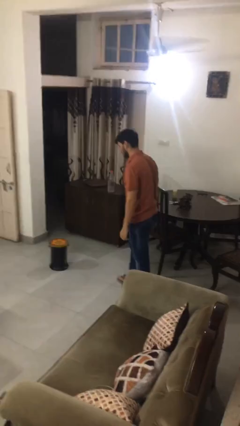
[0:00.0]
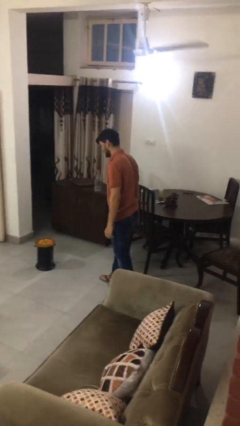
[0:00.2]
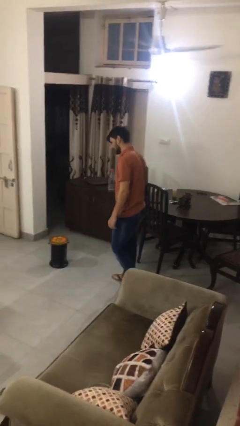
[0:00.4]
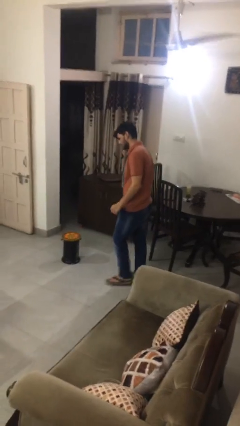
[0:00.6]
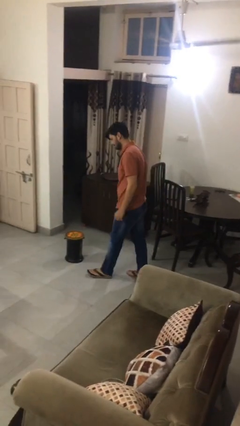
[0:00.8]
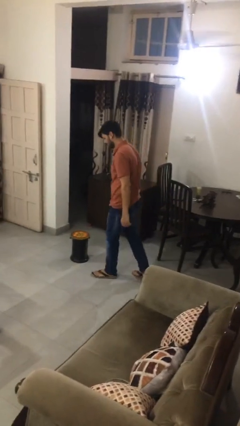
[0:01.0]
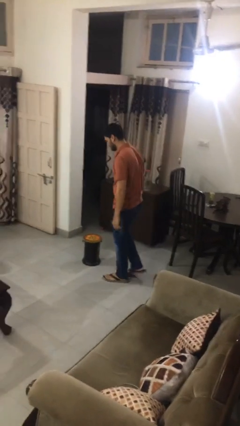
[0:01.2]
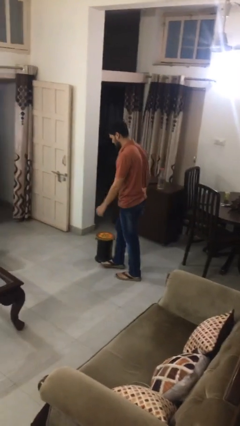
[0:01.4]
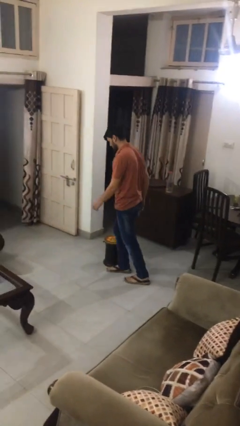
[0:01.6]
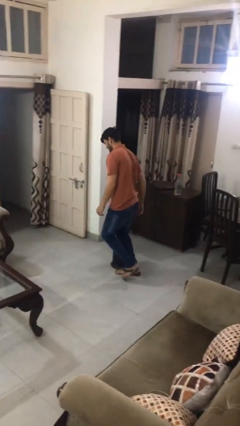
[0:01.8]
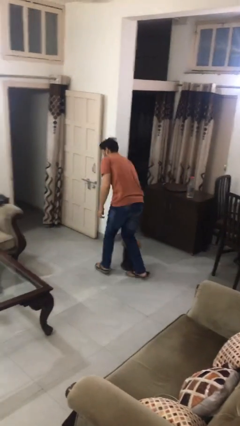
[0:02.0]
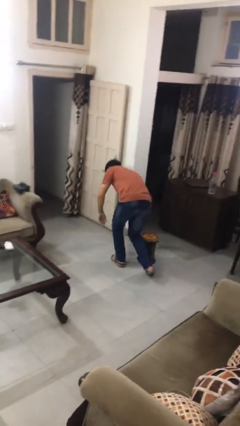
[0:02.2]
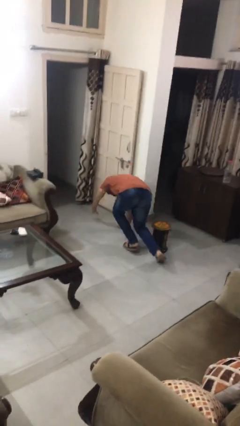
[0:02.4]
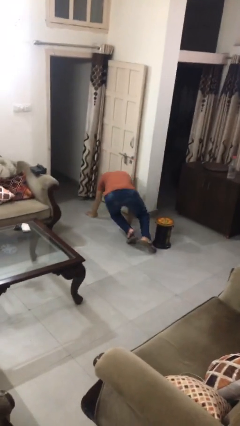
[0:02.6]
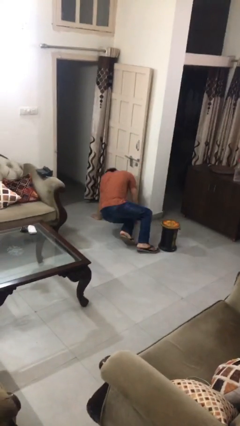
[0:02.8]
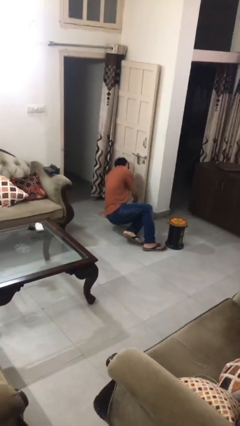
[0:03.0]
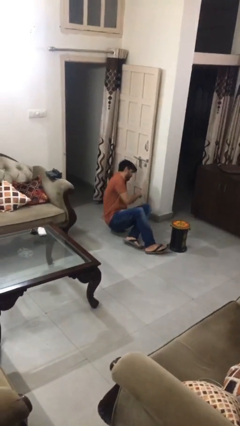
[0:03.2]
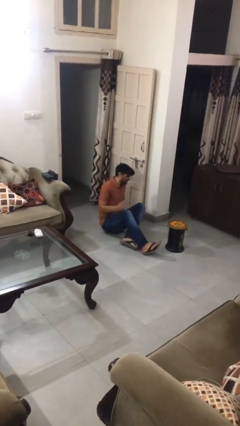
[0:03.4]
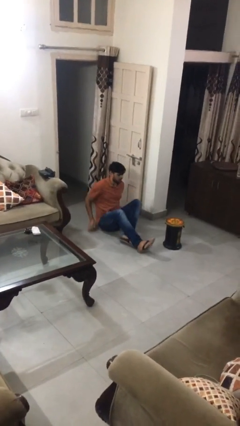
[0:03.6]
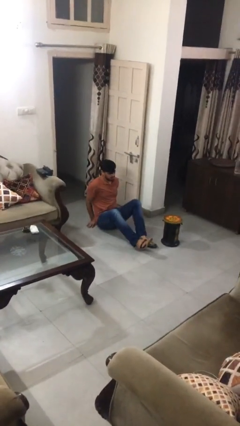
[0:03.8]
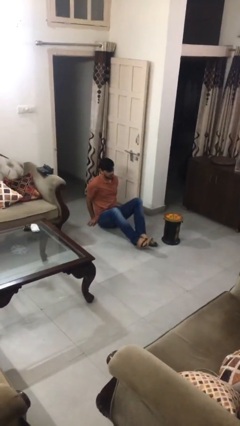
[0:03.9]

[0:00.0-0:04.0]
person trips on object on floor

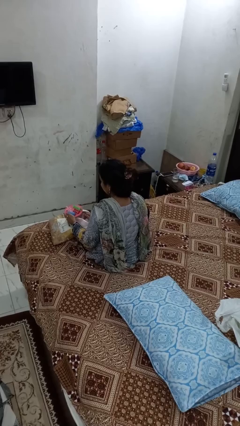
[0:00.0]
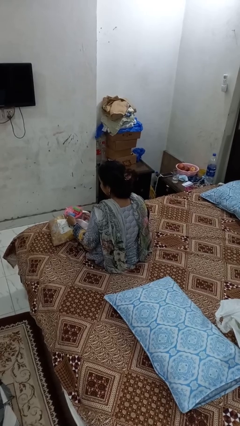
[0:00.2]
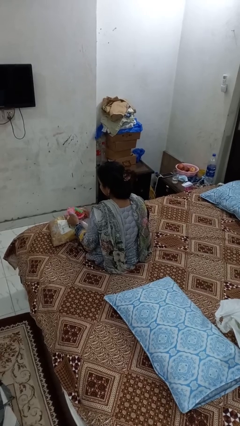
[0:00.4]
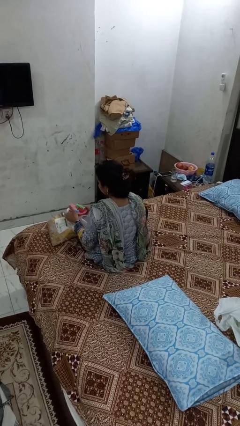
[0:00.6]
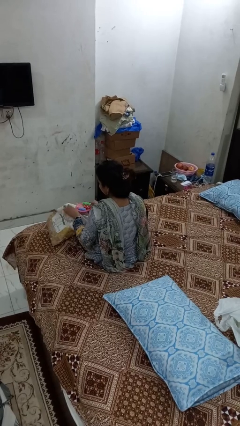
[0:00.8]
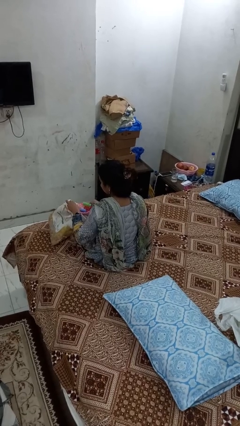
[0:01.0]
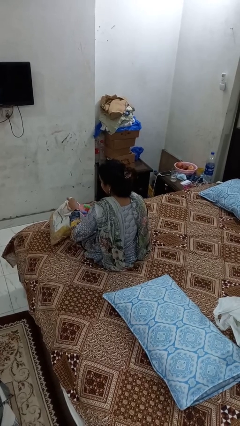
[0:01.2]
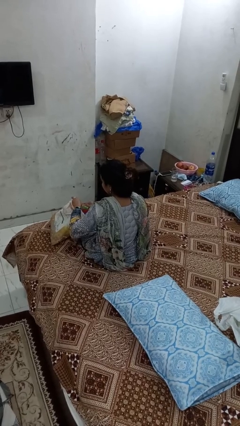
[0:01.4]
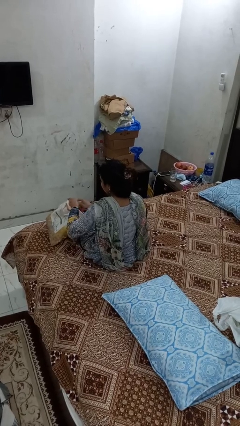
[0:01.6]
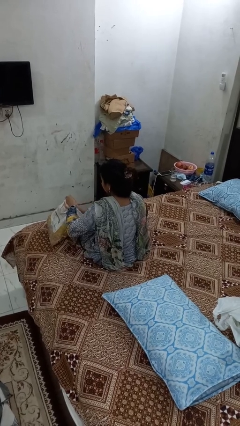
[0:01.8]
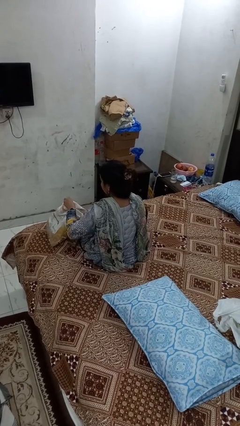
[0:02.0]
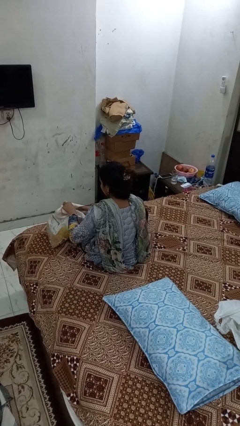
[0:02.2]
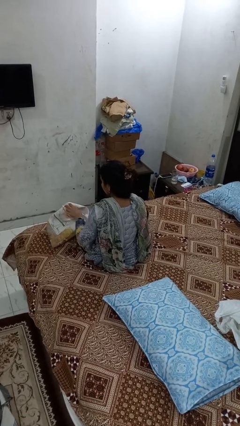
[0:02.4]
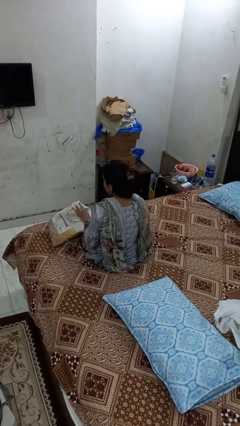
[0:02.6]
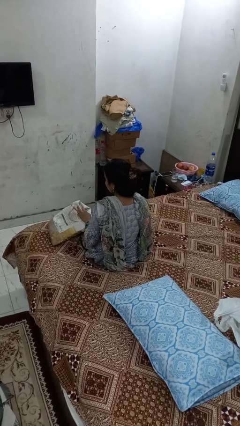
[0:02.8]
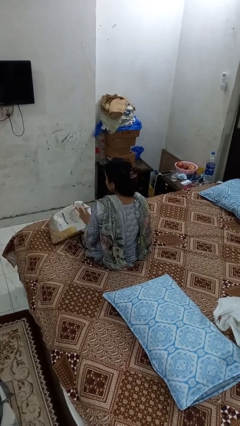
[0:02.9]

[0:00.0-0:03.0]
person puts object into bag

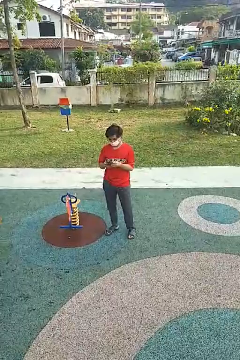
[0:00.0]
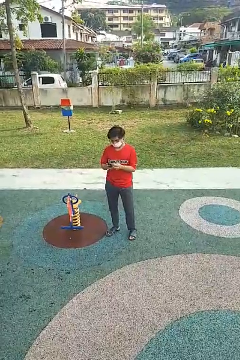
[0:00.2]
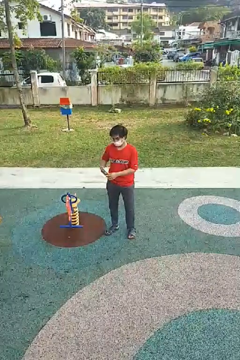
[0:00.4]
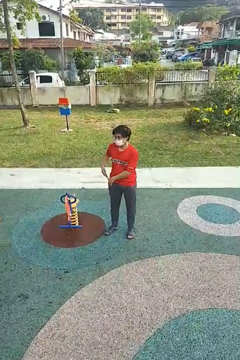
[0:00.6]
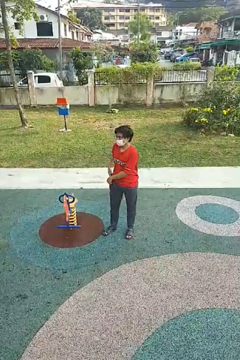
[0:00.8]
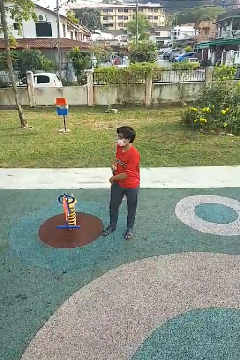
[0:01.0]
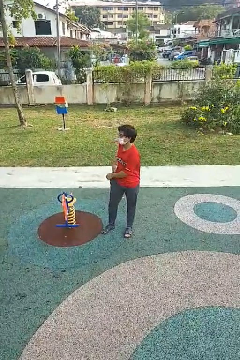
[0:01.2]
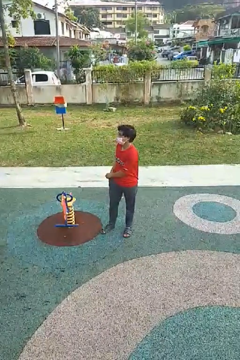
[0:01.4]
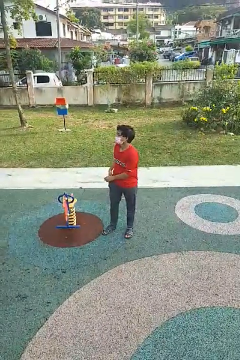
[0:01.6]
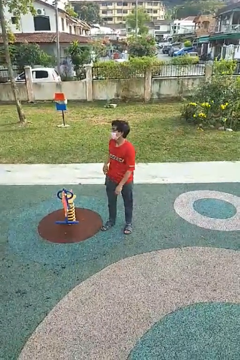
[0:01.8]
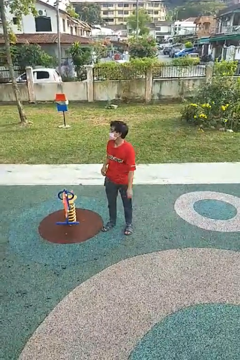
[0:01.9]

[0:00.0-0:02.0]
person puts phone into pocket

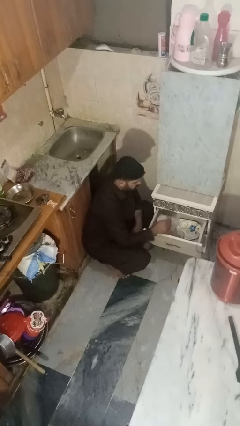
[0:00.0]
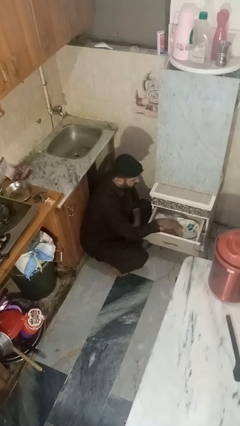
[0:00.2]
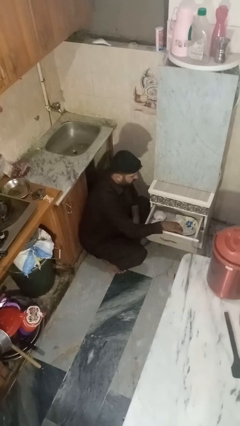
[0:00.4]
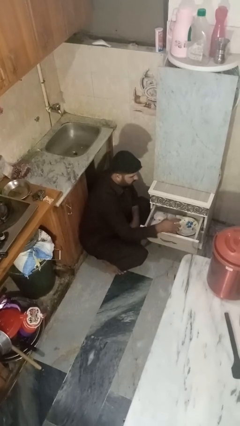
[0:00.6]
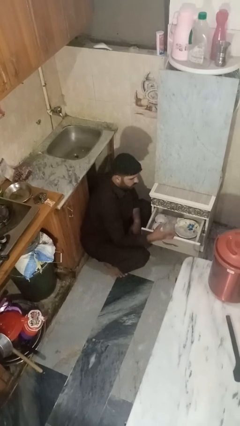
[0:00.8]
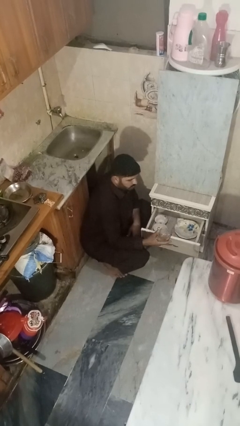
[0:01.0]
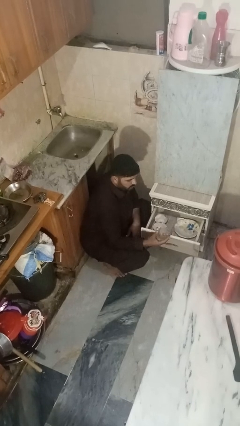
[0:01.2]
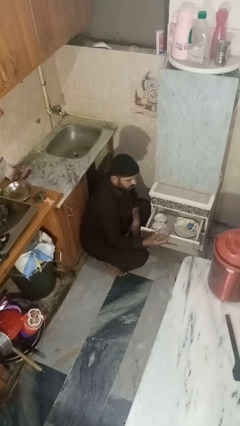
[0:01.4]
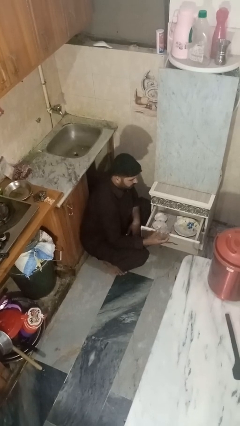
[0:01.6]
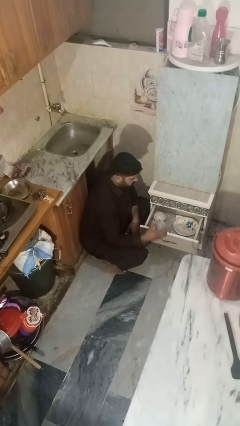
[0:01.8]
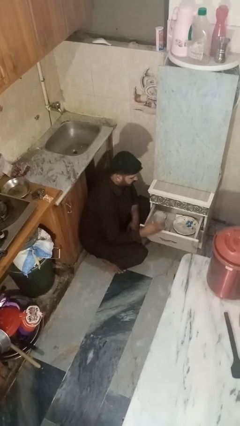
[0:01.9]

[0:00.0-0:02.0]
person takes object from kitchen drawer

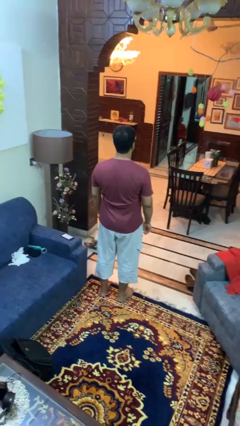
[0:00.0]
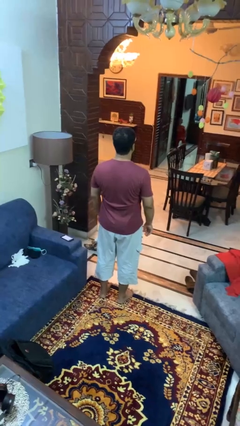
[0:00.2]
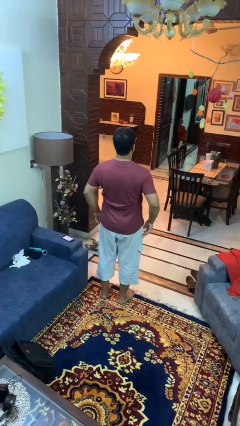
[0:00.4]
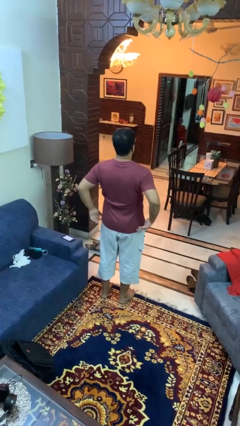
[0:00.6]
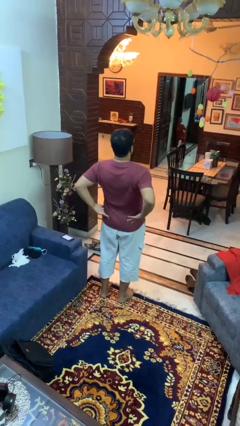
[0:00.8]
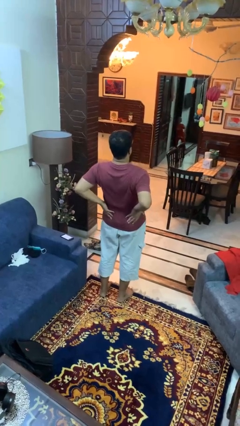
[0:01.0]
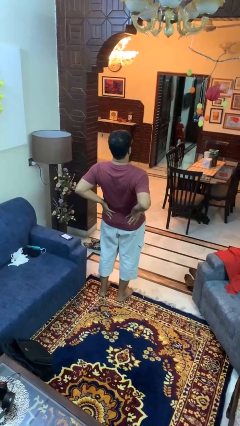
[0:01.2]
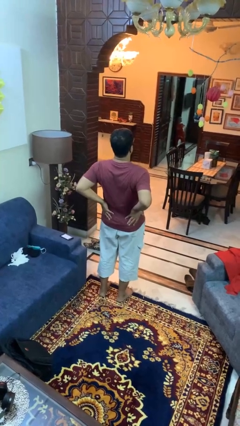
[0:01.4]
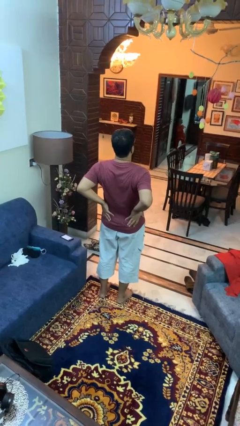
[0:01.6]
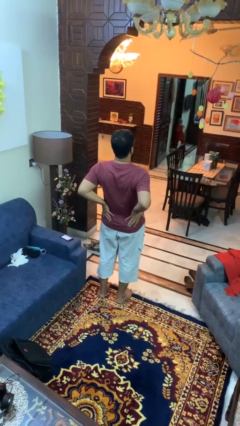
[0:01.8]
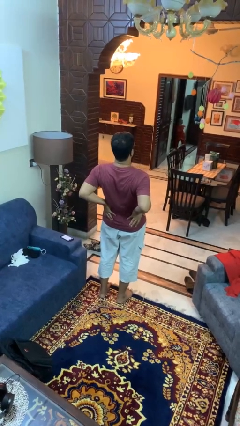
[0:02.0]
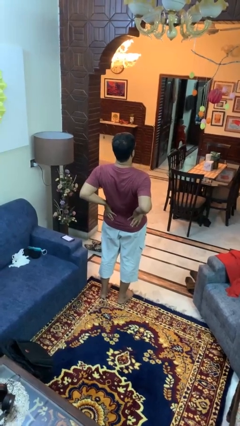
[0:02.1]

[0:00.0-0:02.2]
person stretches back

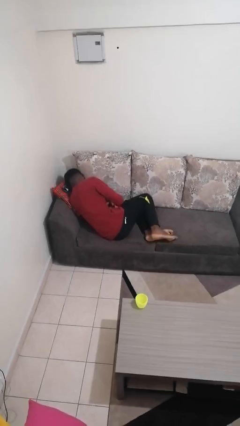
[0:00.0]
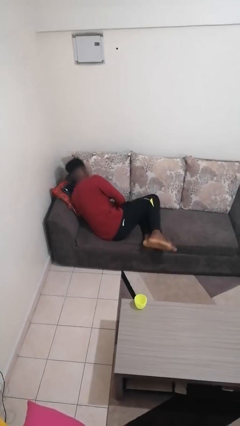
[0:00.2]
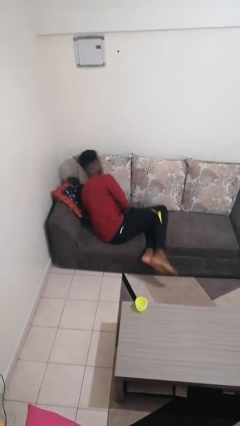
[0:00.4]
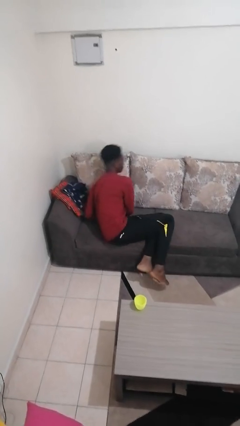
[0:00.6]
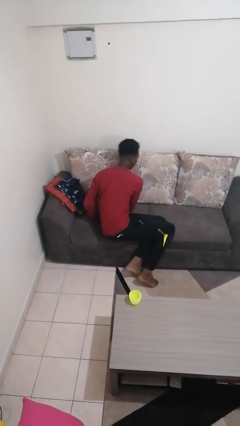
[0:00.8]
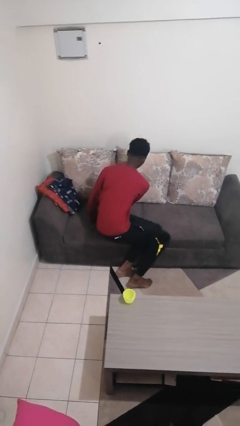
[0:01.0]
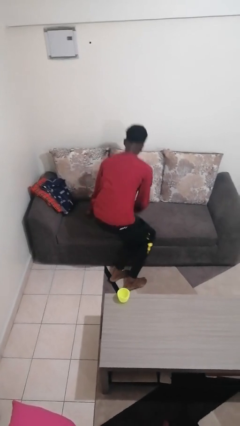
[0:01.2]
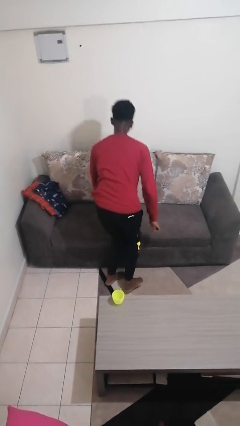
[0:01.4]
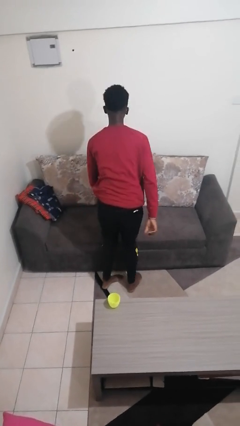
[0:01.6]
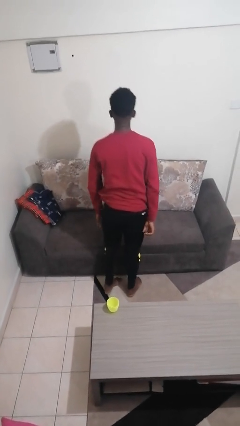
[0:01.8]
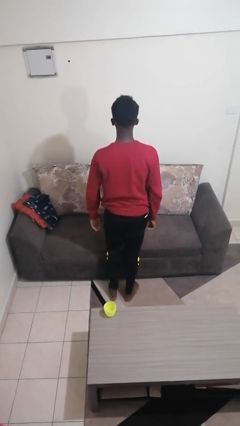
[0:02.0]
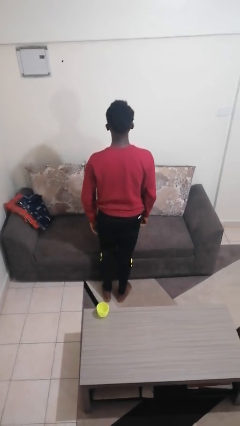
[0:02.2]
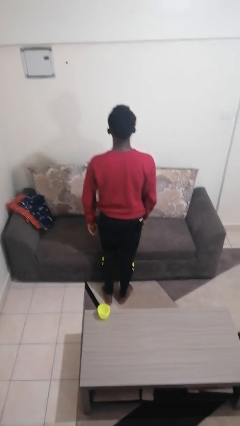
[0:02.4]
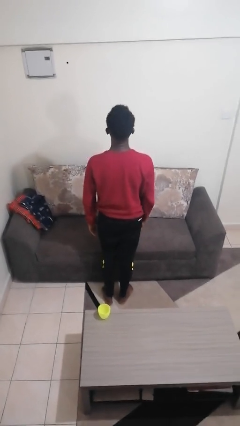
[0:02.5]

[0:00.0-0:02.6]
person stands up

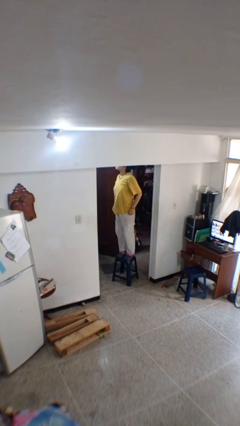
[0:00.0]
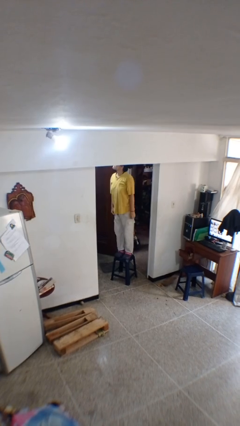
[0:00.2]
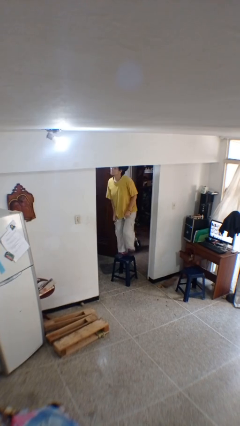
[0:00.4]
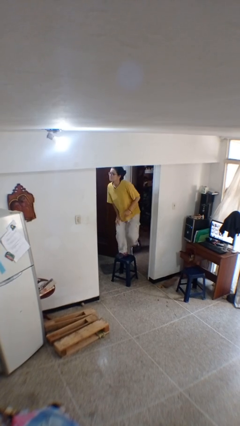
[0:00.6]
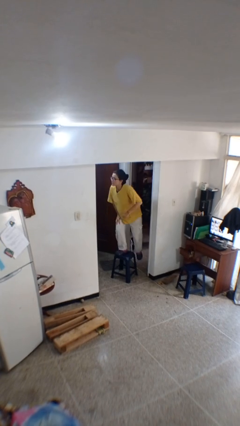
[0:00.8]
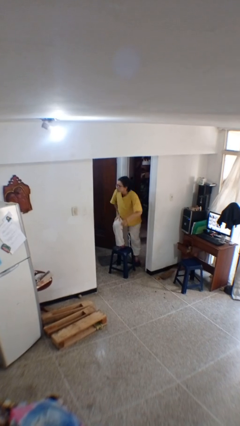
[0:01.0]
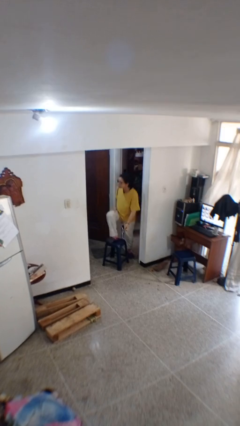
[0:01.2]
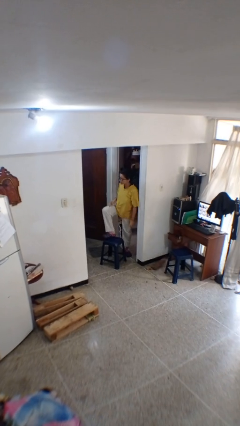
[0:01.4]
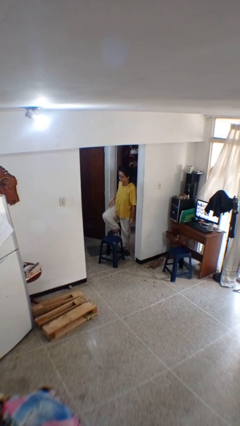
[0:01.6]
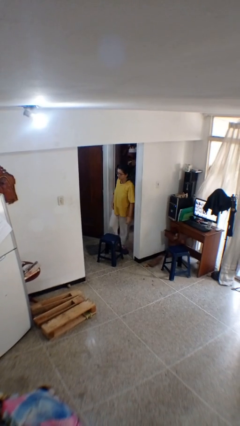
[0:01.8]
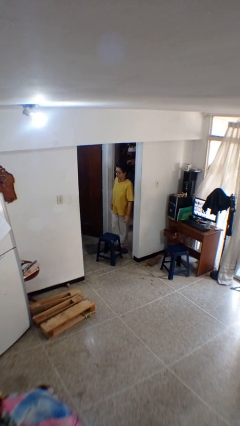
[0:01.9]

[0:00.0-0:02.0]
person climbs off chair
